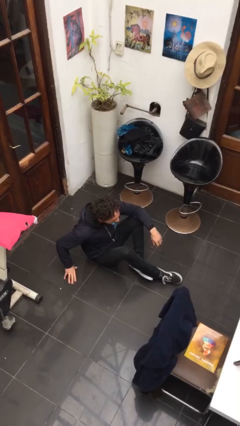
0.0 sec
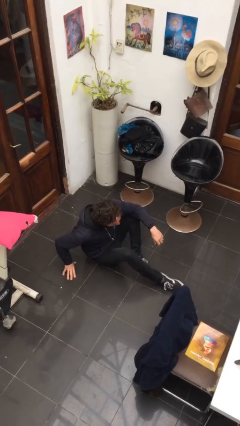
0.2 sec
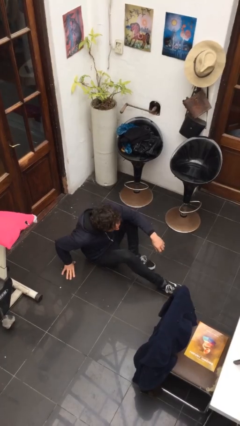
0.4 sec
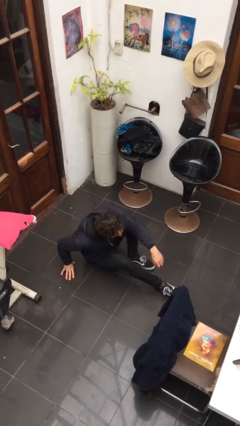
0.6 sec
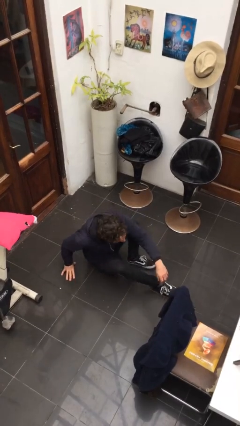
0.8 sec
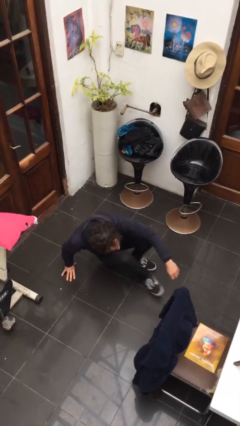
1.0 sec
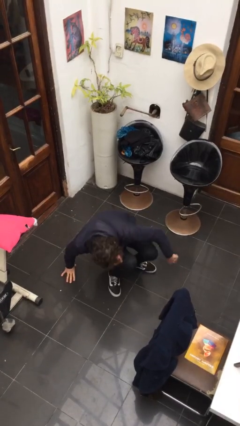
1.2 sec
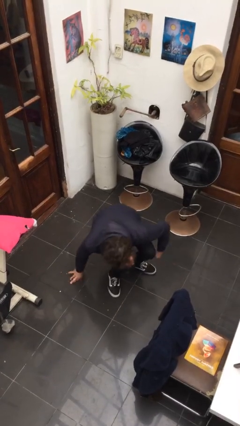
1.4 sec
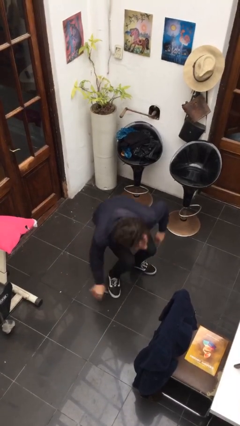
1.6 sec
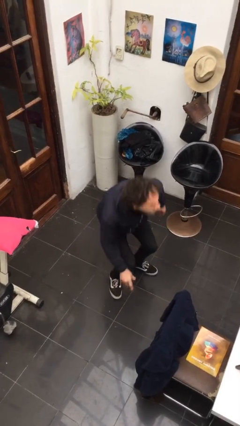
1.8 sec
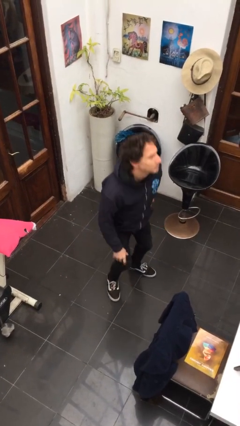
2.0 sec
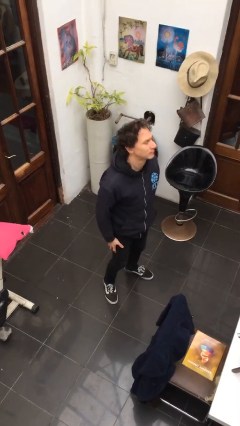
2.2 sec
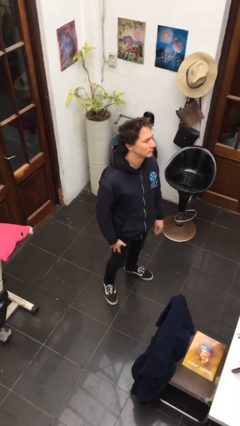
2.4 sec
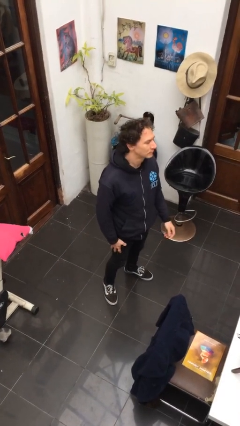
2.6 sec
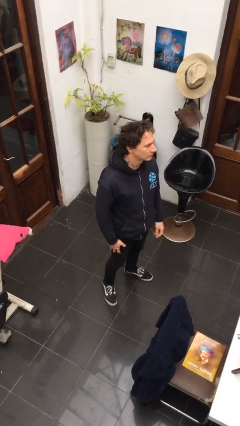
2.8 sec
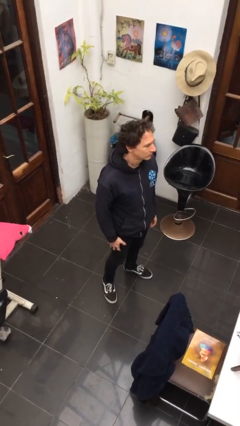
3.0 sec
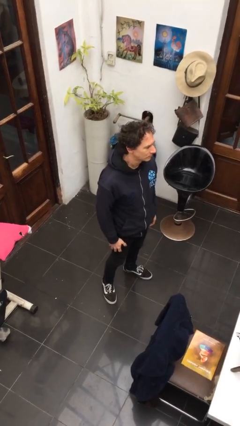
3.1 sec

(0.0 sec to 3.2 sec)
person stands up from floor

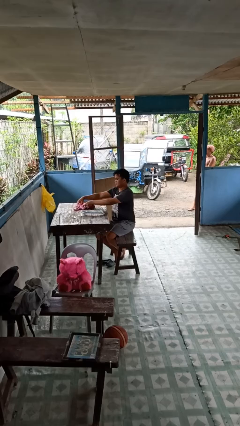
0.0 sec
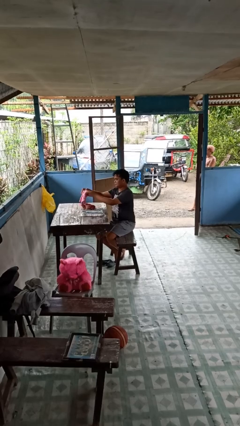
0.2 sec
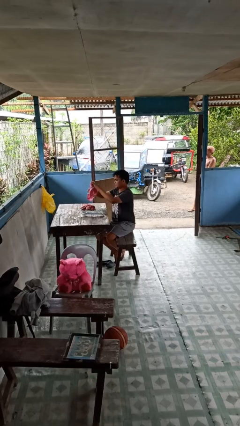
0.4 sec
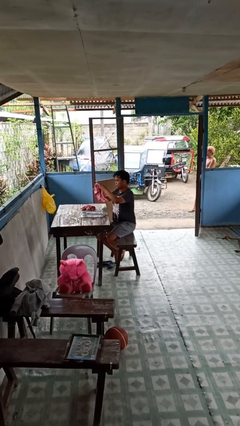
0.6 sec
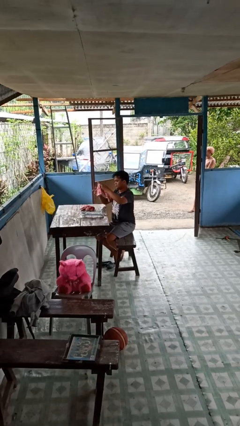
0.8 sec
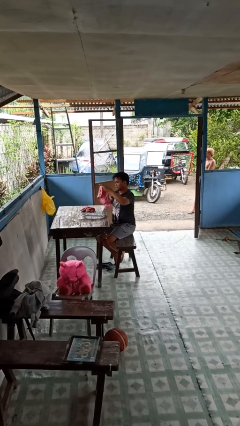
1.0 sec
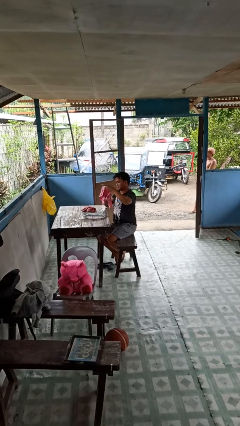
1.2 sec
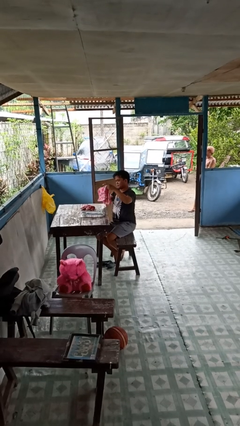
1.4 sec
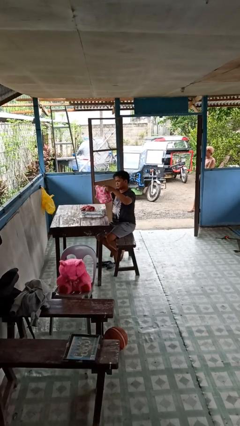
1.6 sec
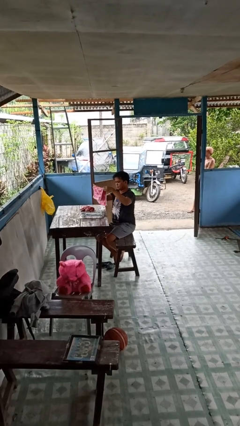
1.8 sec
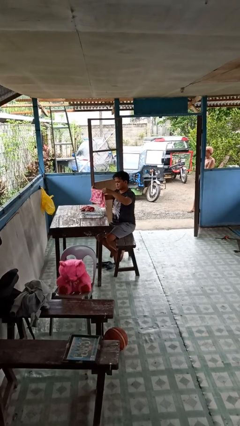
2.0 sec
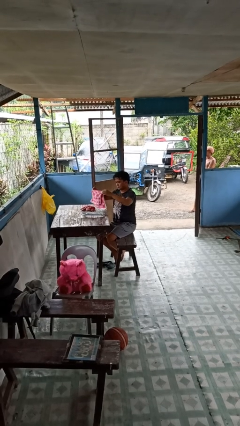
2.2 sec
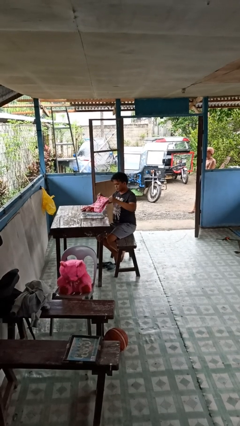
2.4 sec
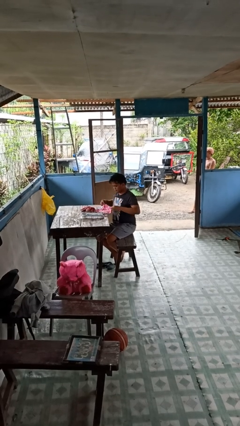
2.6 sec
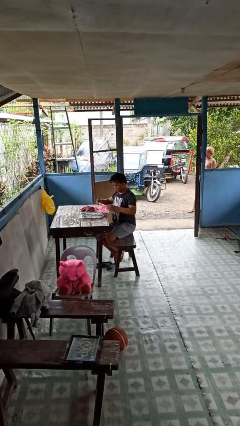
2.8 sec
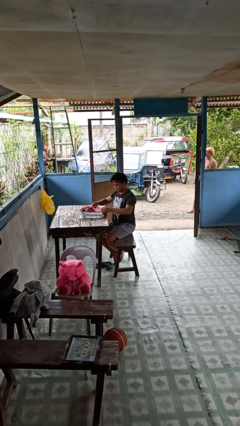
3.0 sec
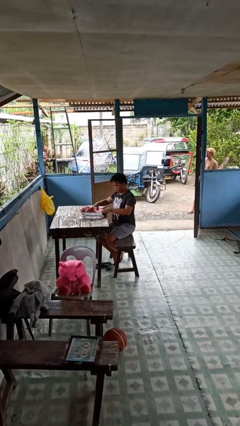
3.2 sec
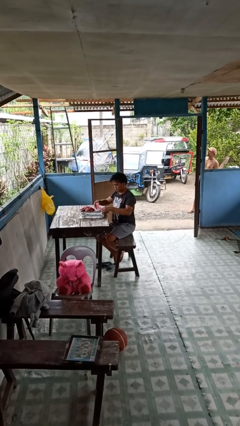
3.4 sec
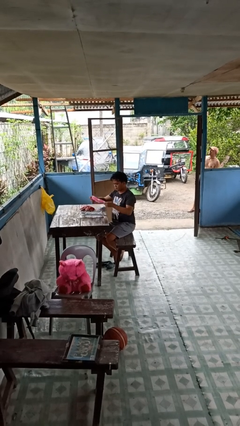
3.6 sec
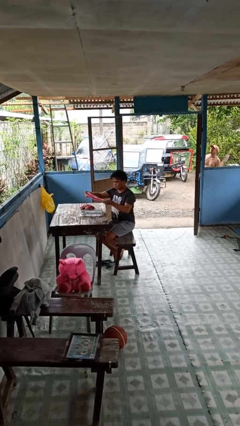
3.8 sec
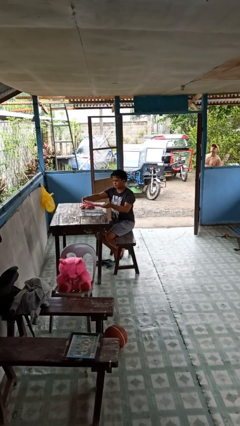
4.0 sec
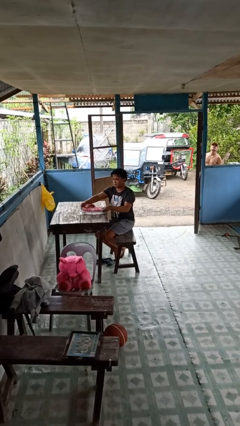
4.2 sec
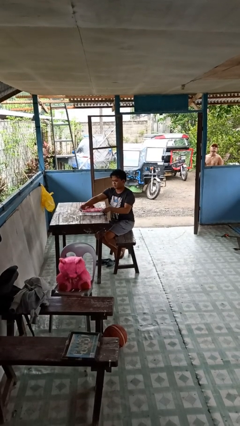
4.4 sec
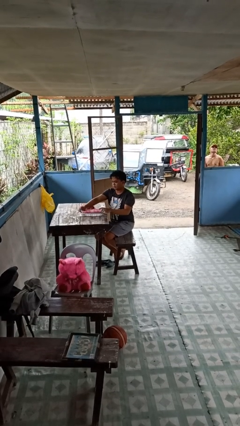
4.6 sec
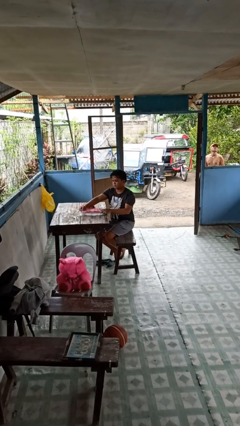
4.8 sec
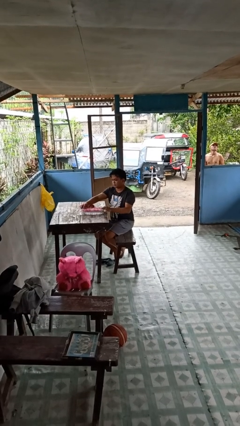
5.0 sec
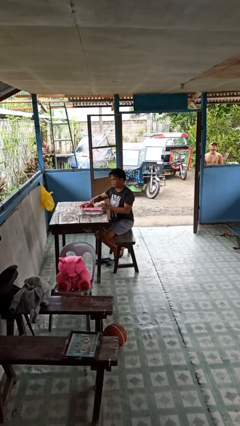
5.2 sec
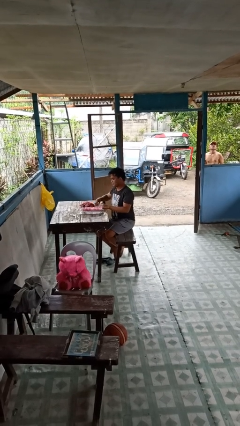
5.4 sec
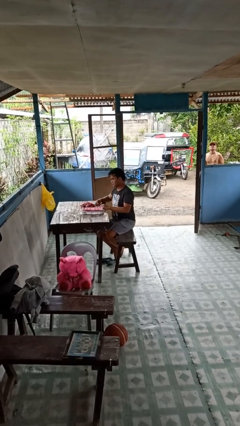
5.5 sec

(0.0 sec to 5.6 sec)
person folds towel

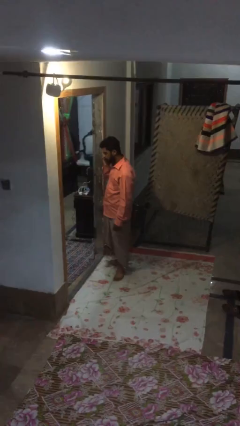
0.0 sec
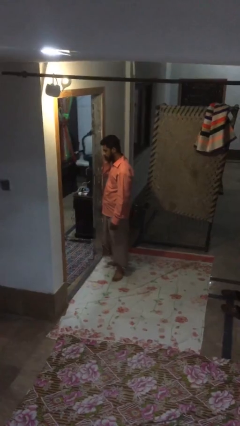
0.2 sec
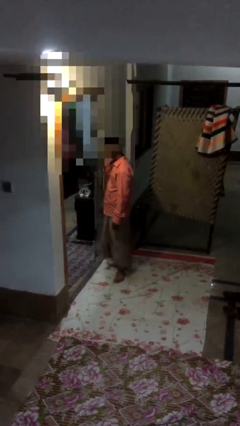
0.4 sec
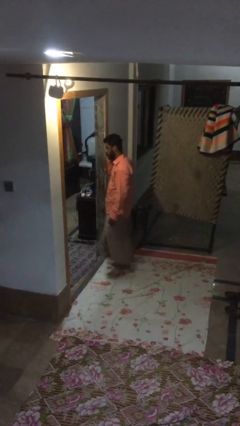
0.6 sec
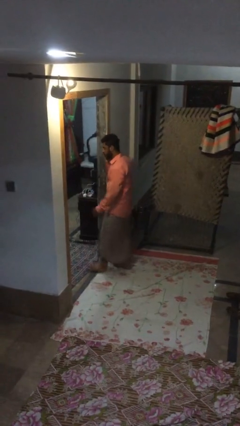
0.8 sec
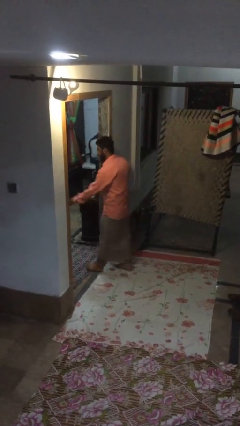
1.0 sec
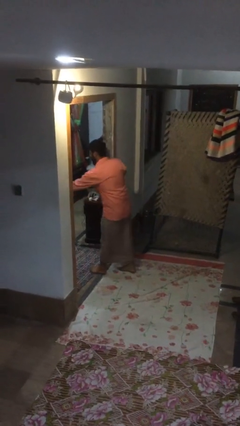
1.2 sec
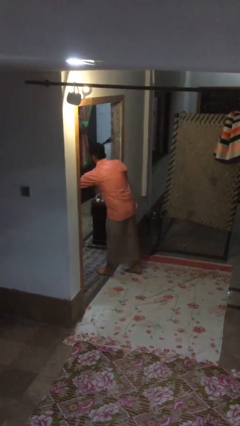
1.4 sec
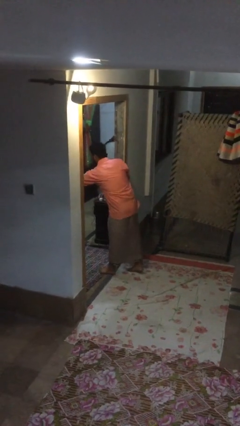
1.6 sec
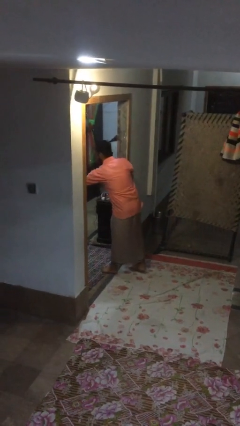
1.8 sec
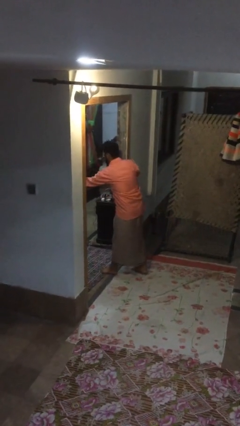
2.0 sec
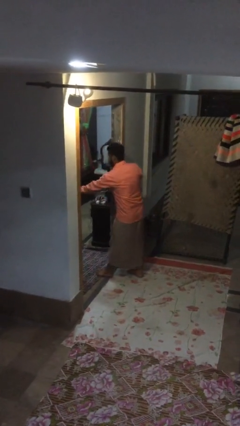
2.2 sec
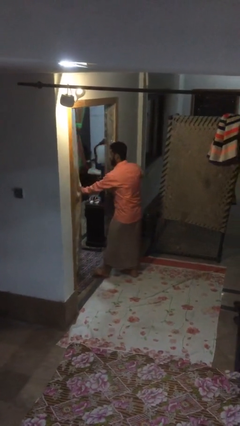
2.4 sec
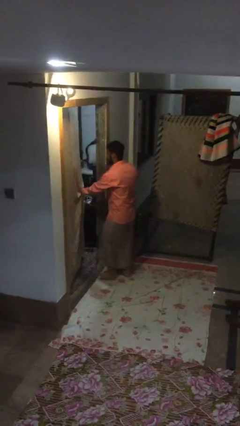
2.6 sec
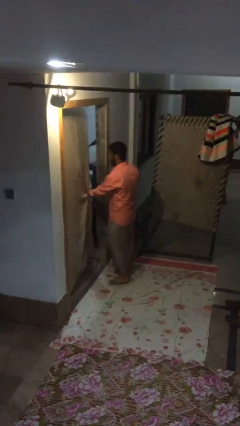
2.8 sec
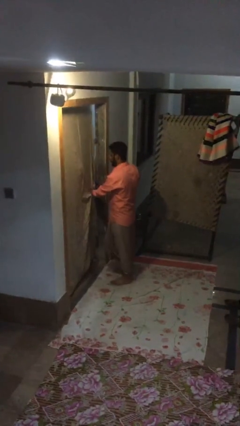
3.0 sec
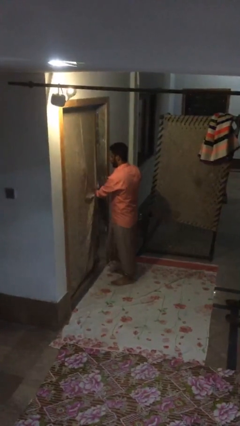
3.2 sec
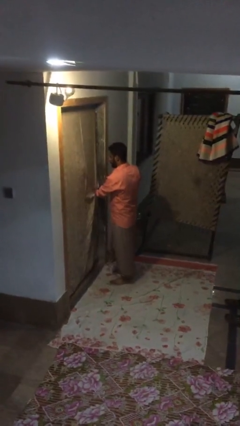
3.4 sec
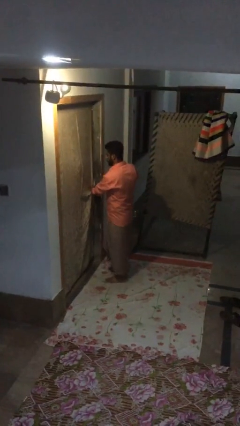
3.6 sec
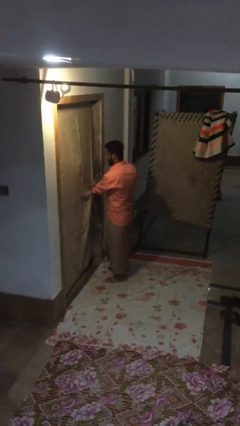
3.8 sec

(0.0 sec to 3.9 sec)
person closes facility door

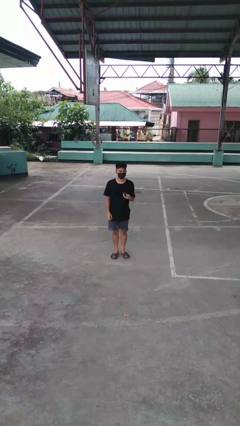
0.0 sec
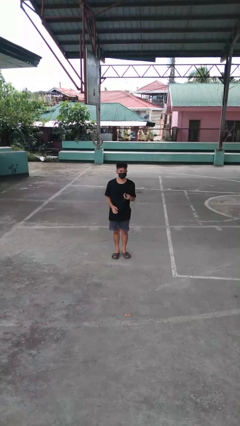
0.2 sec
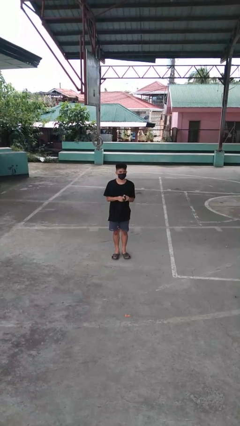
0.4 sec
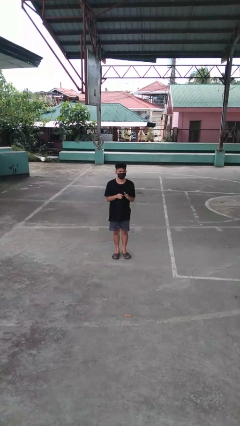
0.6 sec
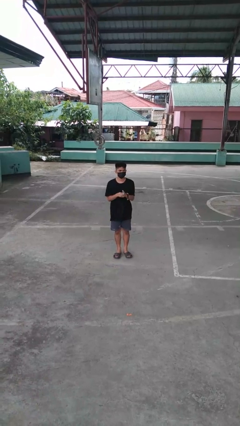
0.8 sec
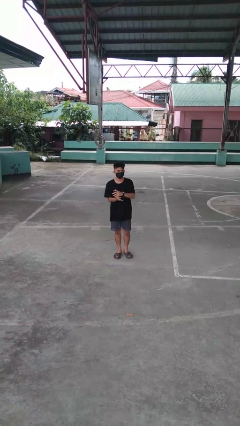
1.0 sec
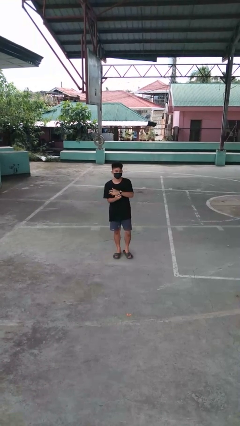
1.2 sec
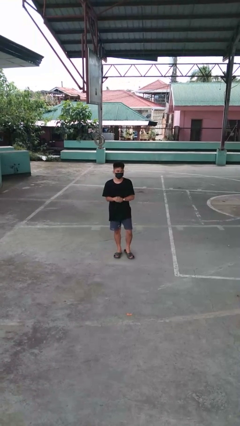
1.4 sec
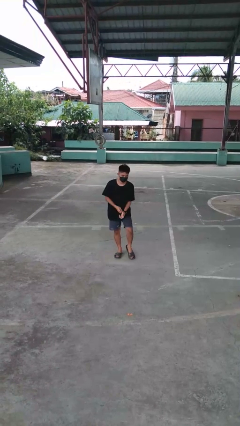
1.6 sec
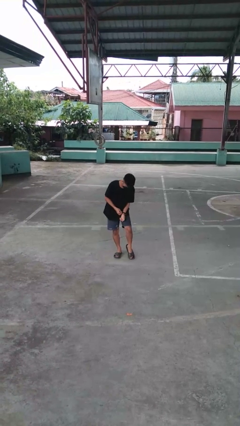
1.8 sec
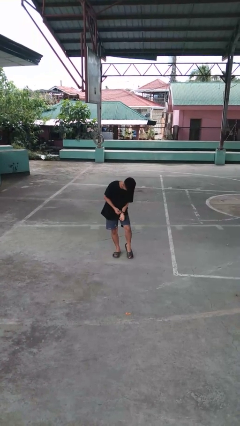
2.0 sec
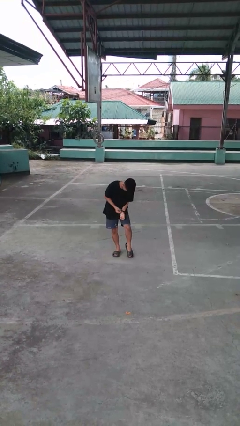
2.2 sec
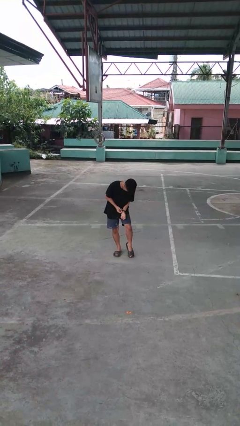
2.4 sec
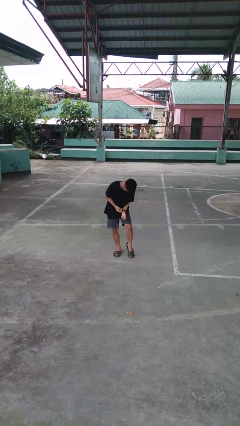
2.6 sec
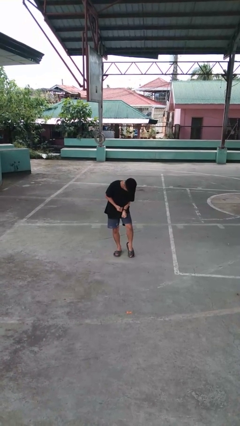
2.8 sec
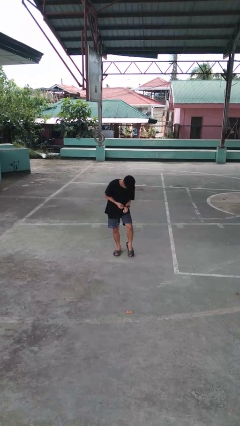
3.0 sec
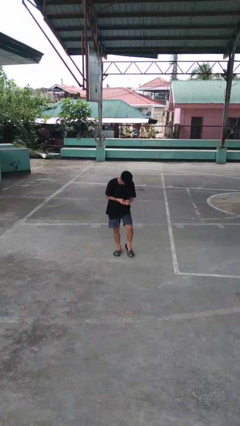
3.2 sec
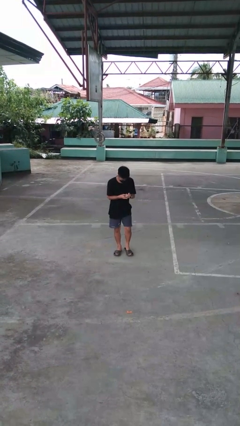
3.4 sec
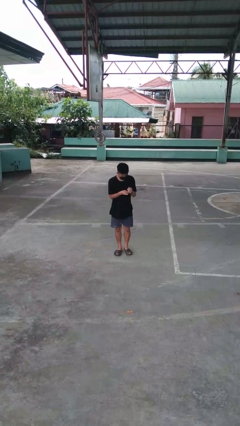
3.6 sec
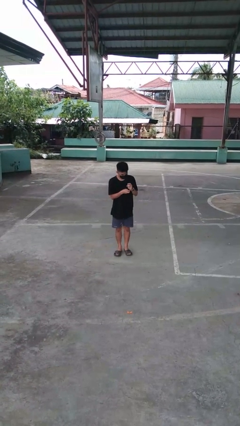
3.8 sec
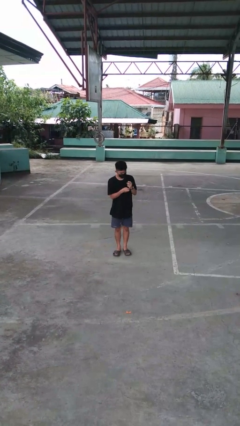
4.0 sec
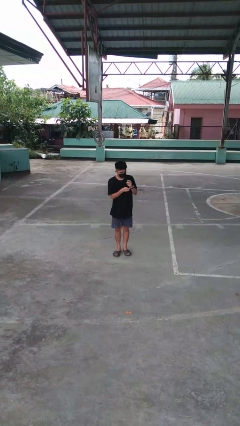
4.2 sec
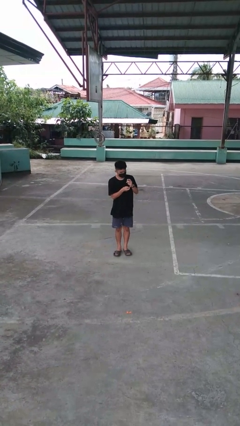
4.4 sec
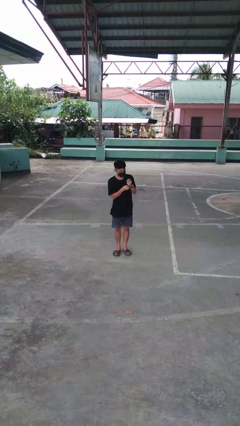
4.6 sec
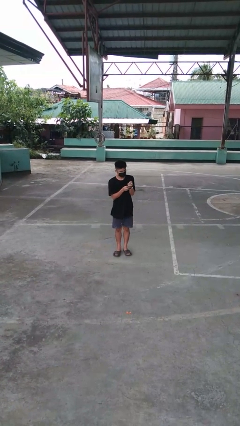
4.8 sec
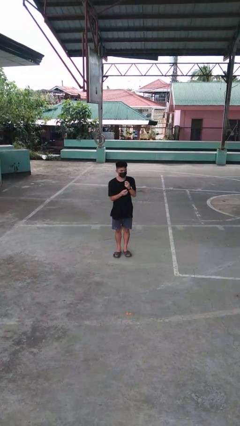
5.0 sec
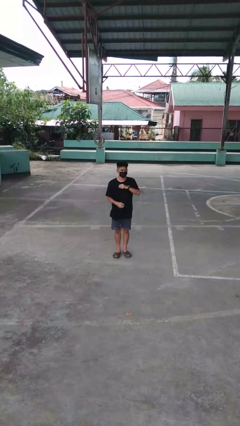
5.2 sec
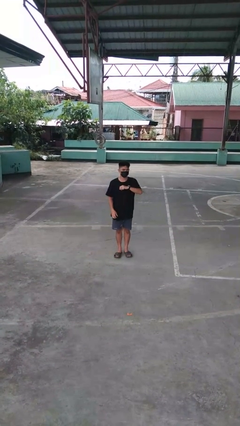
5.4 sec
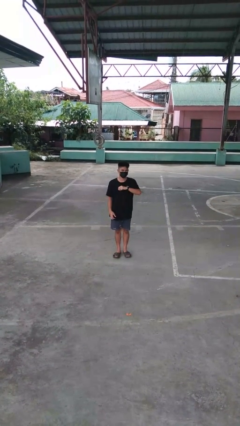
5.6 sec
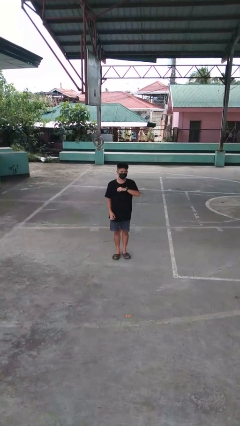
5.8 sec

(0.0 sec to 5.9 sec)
person puts on wristwatch
